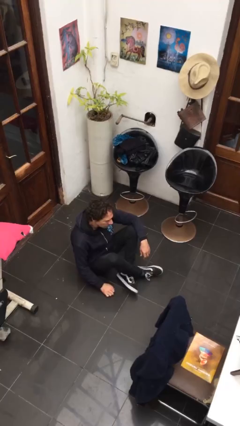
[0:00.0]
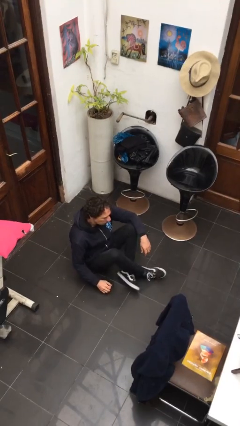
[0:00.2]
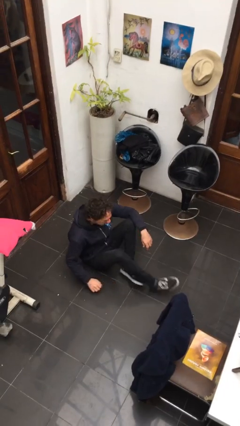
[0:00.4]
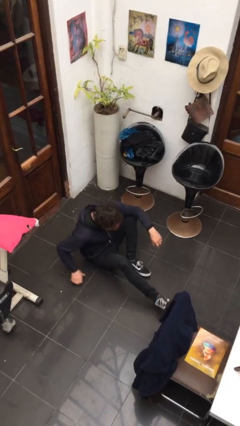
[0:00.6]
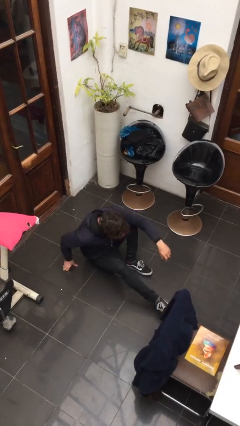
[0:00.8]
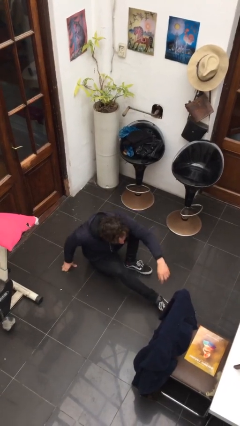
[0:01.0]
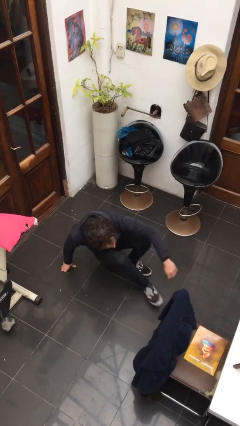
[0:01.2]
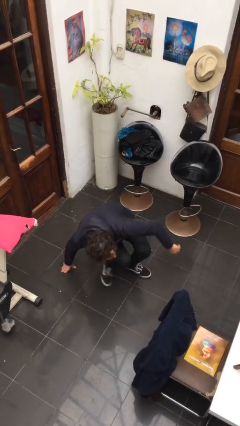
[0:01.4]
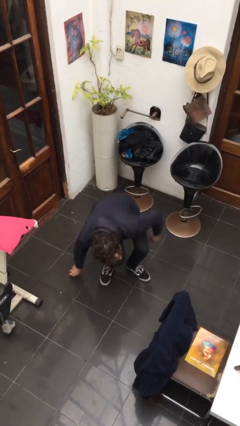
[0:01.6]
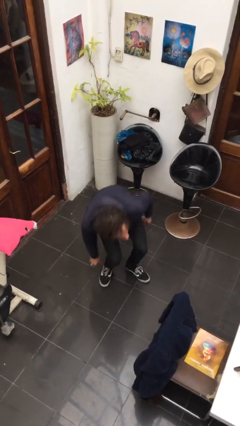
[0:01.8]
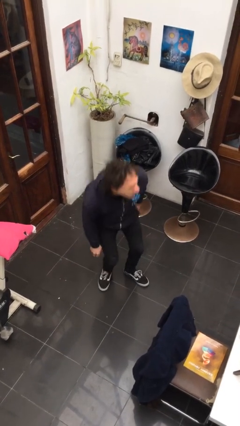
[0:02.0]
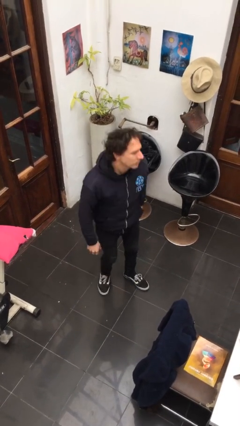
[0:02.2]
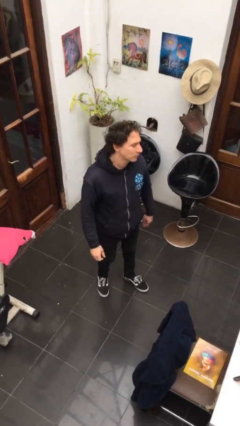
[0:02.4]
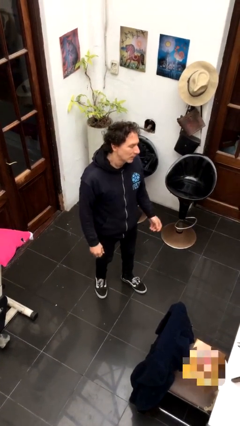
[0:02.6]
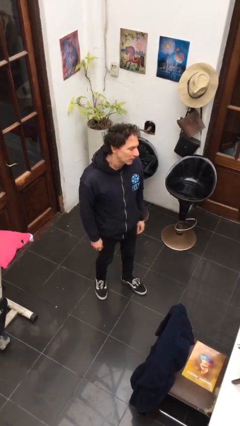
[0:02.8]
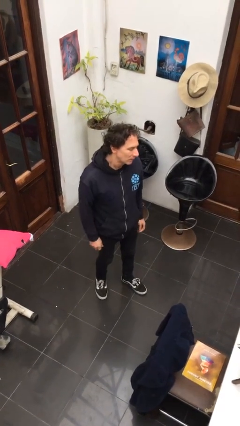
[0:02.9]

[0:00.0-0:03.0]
person stands up from floor

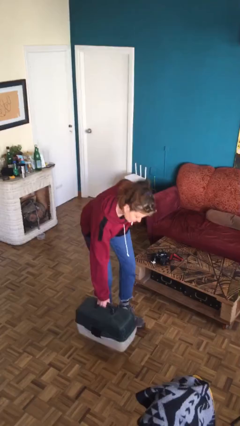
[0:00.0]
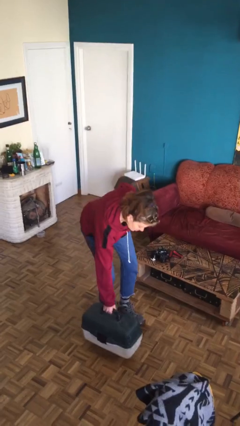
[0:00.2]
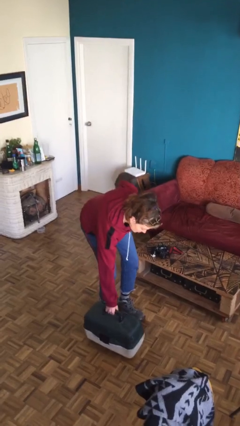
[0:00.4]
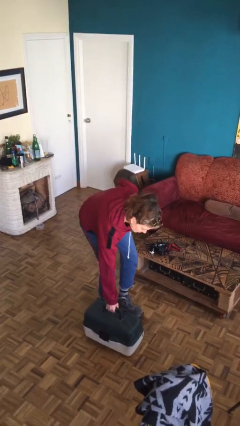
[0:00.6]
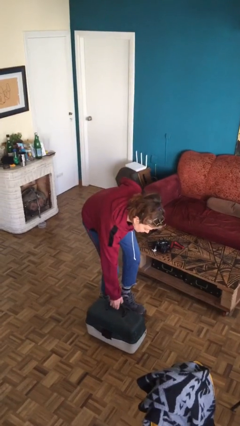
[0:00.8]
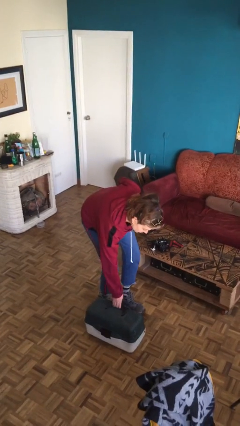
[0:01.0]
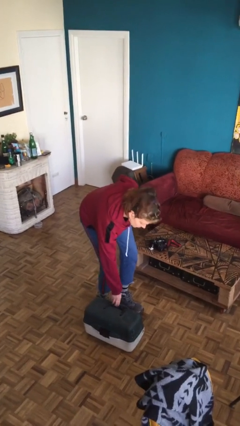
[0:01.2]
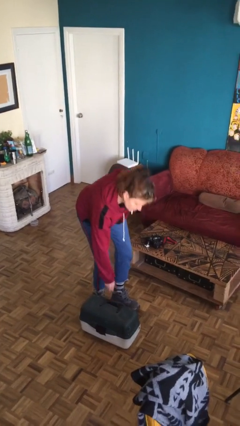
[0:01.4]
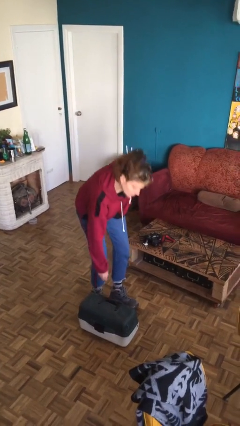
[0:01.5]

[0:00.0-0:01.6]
person puts down object on floor

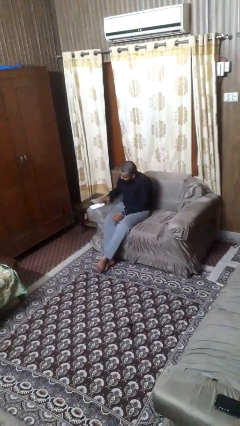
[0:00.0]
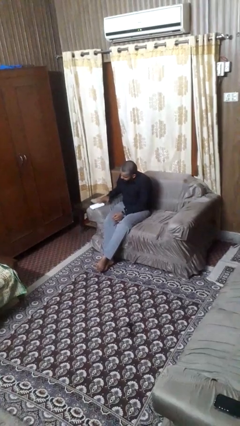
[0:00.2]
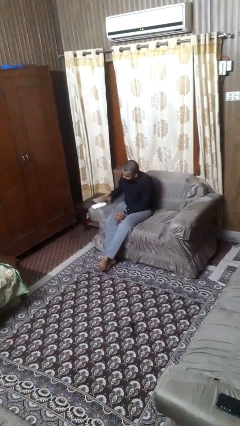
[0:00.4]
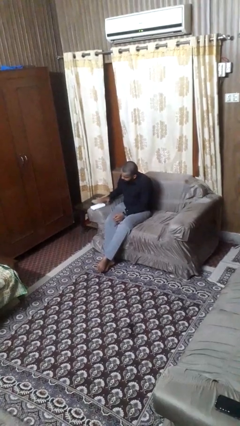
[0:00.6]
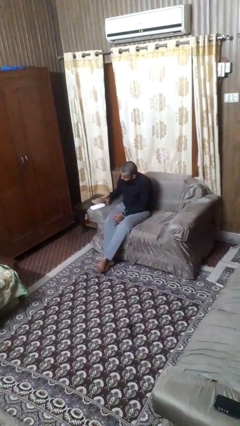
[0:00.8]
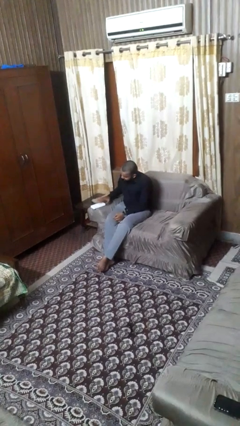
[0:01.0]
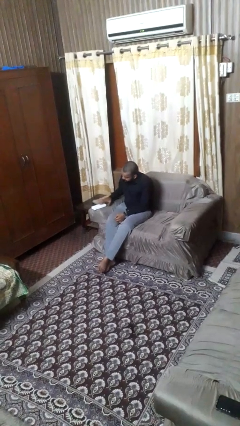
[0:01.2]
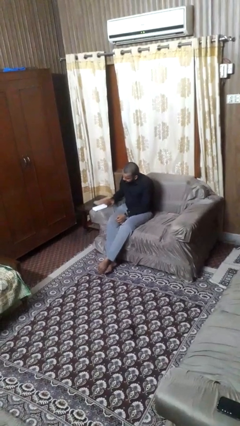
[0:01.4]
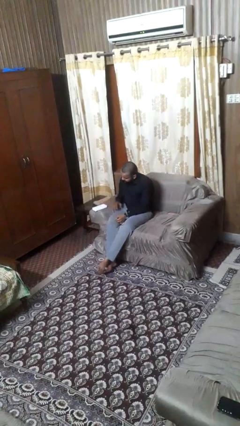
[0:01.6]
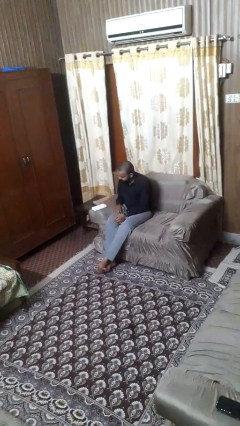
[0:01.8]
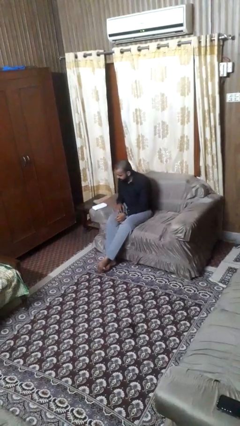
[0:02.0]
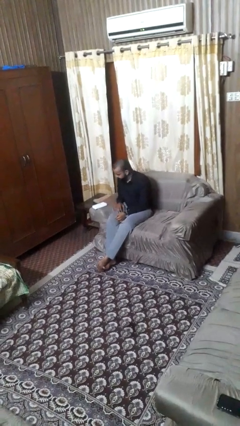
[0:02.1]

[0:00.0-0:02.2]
person taps object with finger

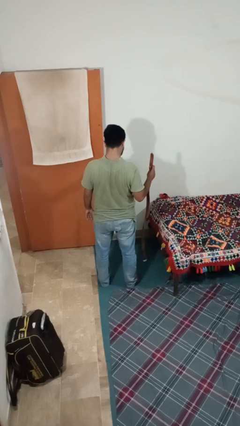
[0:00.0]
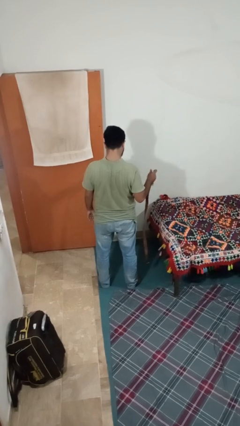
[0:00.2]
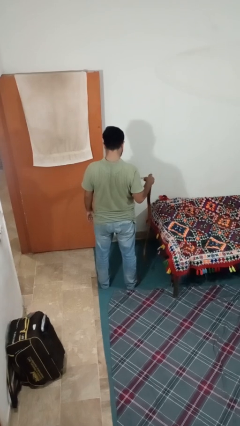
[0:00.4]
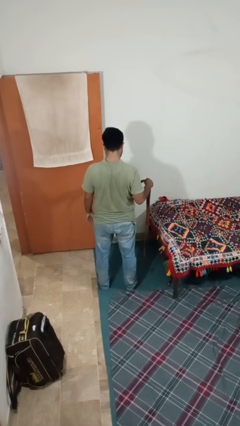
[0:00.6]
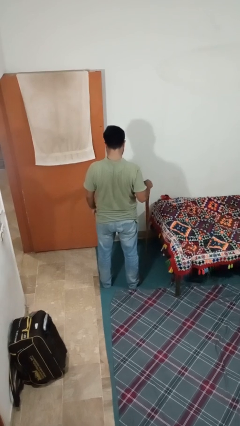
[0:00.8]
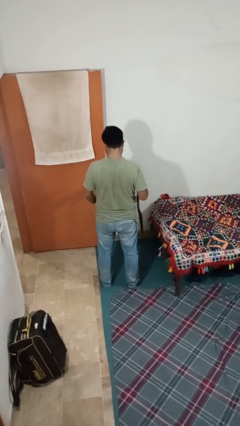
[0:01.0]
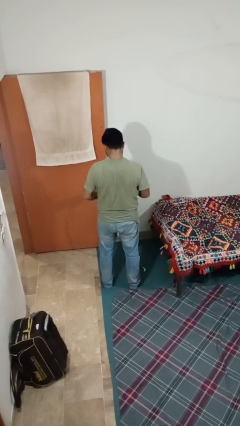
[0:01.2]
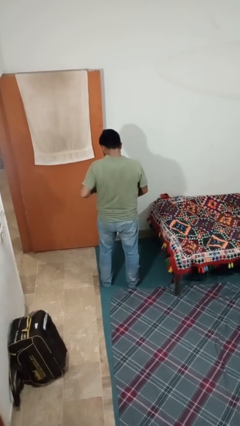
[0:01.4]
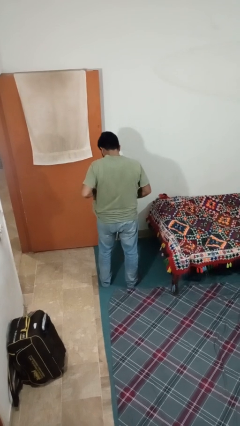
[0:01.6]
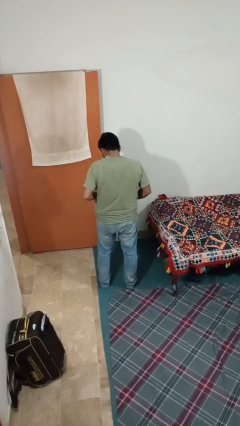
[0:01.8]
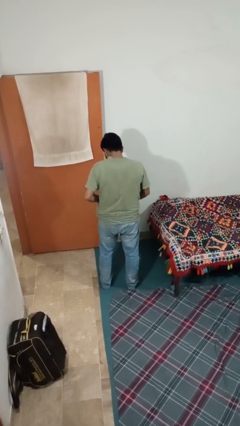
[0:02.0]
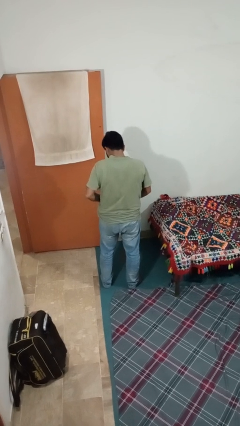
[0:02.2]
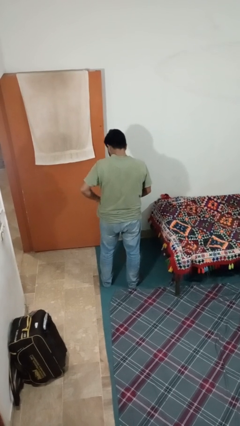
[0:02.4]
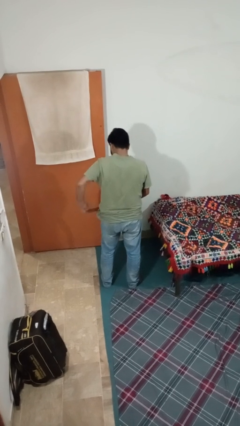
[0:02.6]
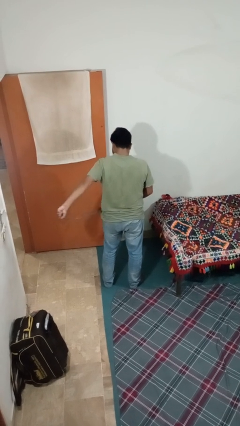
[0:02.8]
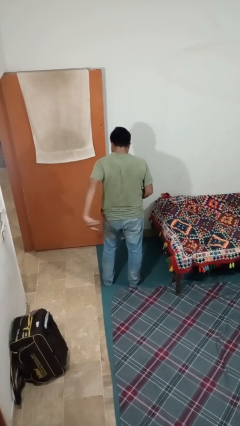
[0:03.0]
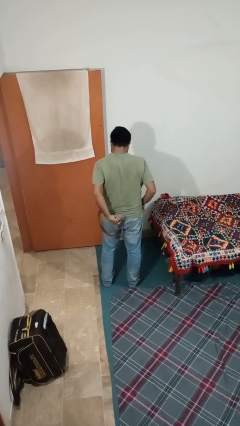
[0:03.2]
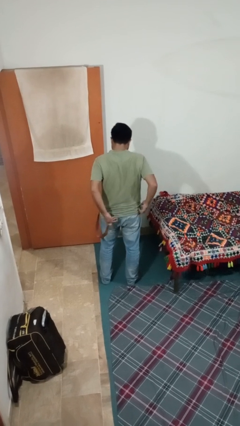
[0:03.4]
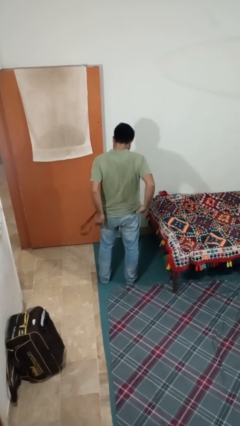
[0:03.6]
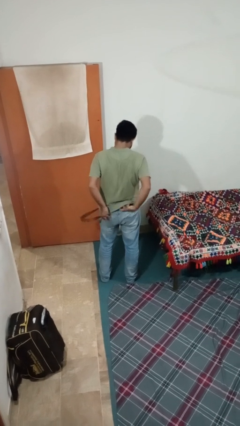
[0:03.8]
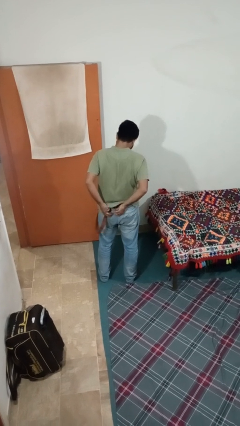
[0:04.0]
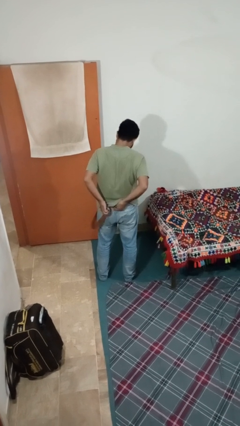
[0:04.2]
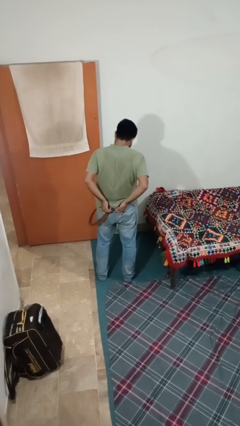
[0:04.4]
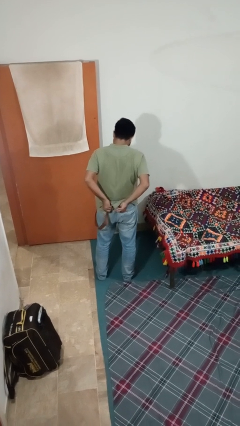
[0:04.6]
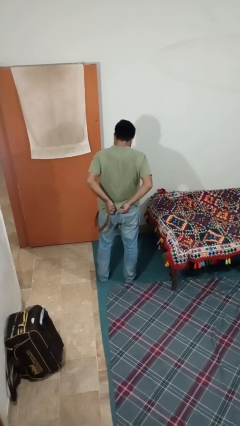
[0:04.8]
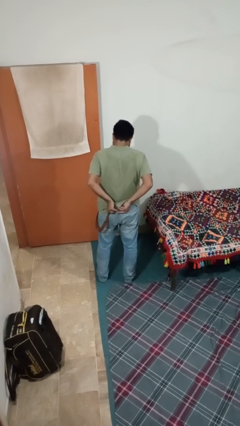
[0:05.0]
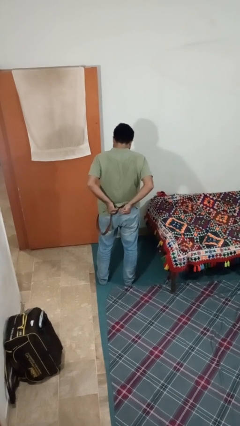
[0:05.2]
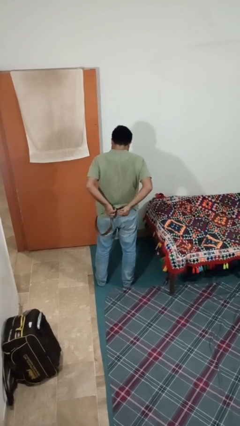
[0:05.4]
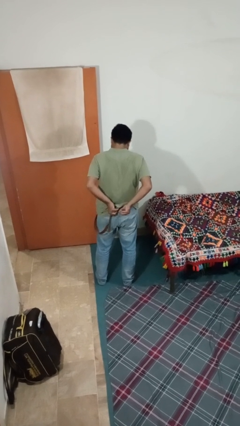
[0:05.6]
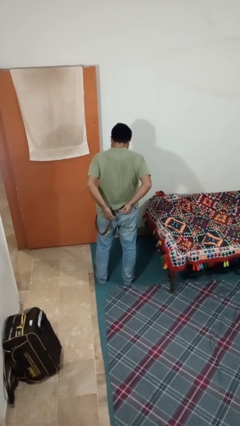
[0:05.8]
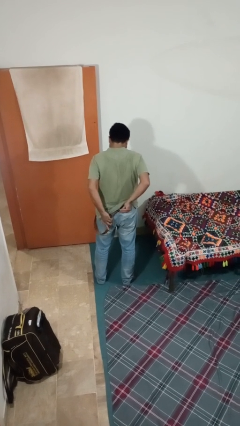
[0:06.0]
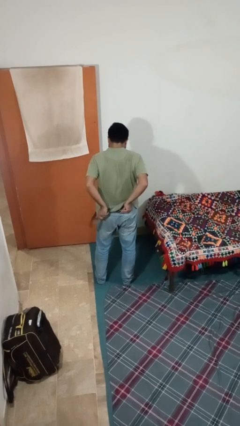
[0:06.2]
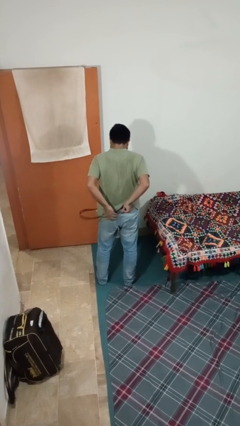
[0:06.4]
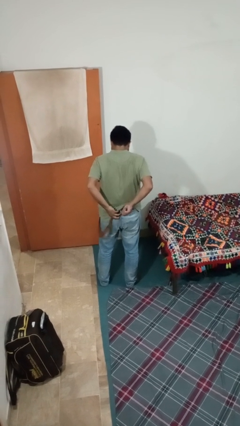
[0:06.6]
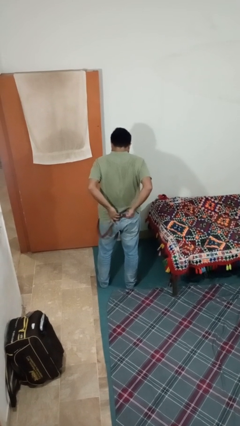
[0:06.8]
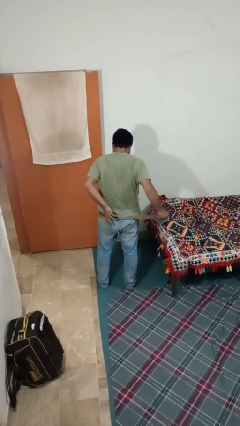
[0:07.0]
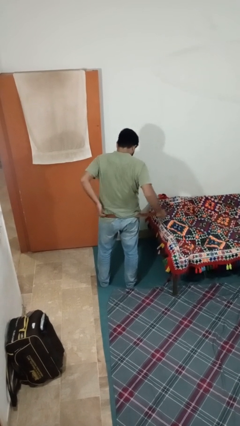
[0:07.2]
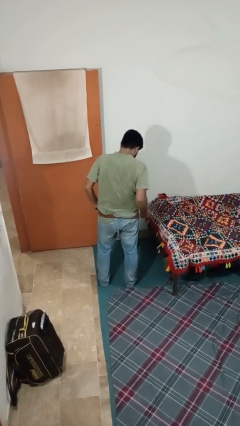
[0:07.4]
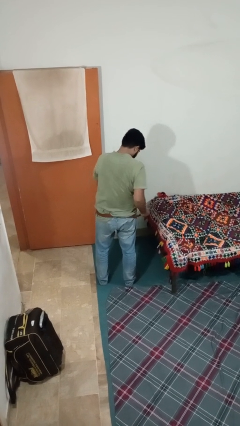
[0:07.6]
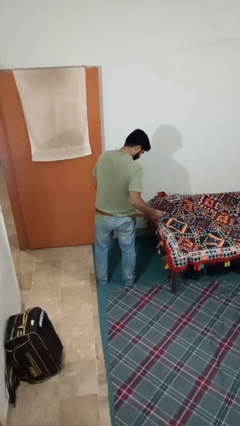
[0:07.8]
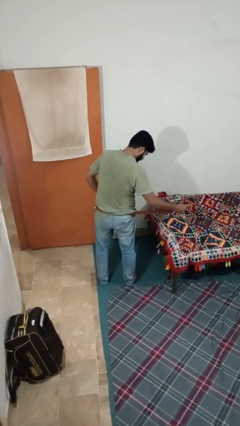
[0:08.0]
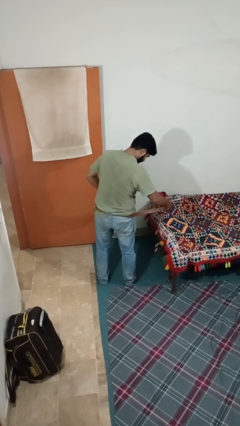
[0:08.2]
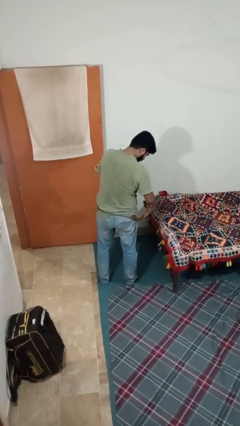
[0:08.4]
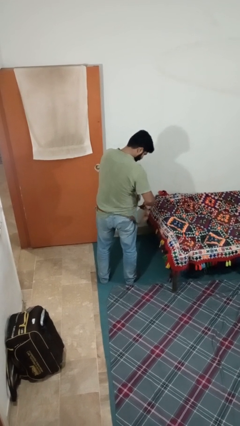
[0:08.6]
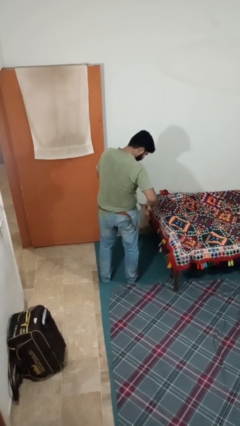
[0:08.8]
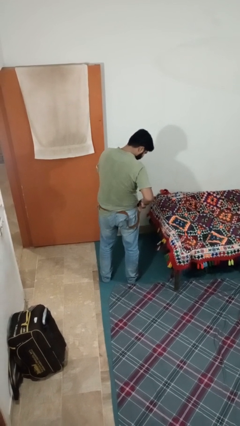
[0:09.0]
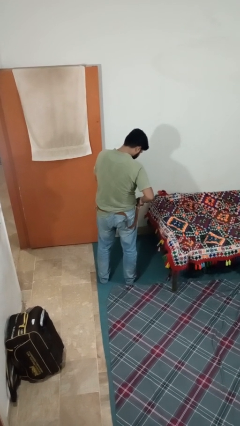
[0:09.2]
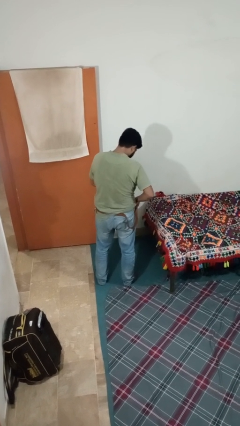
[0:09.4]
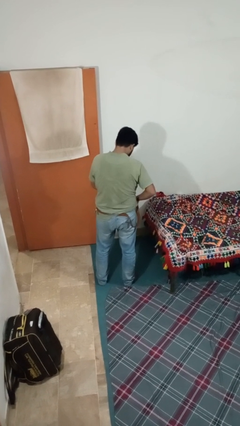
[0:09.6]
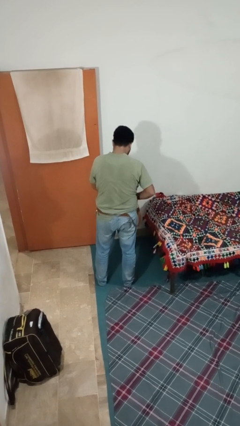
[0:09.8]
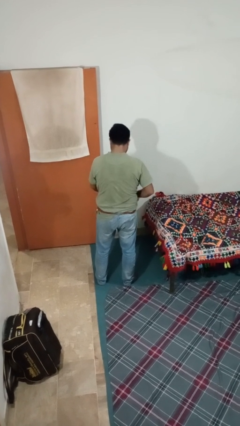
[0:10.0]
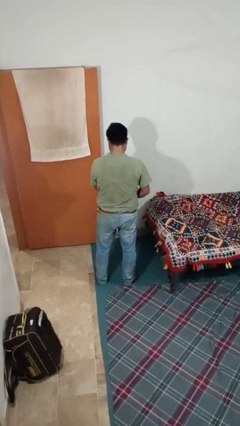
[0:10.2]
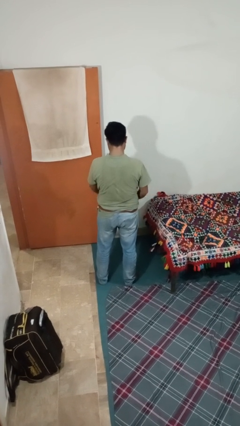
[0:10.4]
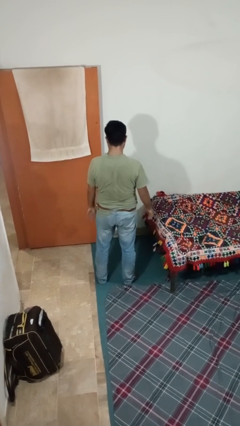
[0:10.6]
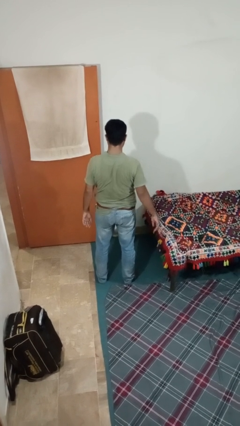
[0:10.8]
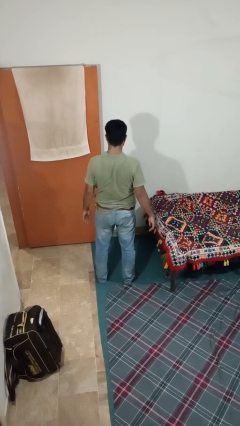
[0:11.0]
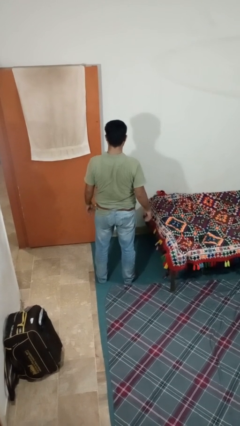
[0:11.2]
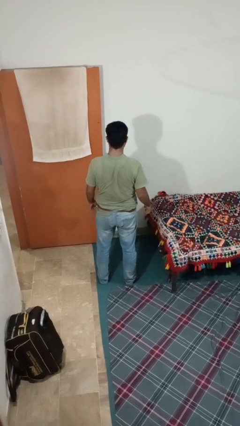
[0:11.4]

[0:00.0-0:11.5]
person puts on belt
